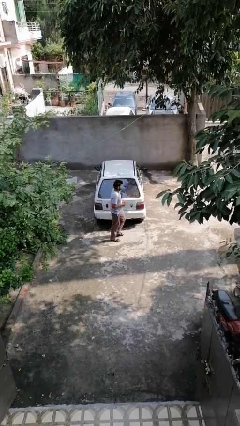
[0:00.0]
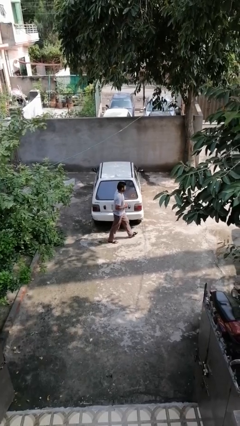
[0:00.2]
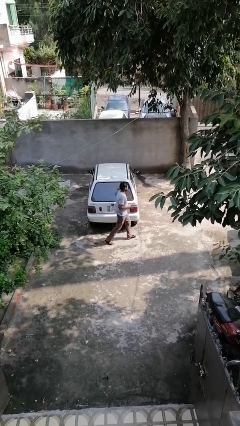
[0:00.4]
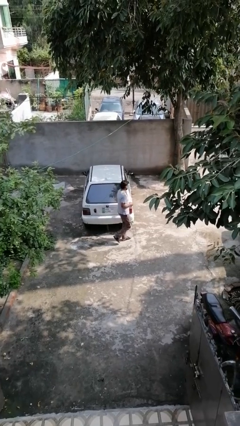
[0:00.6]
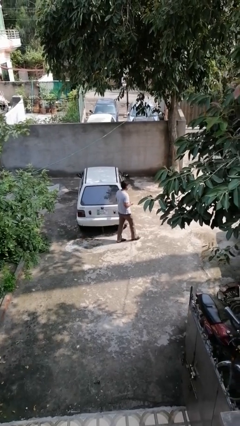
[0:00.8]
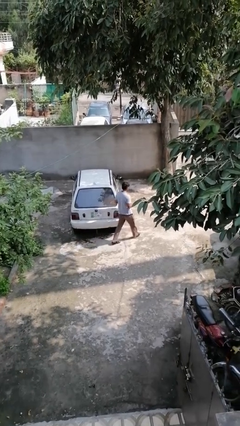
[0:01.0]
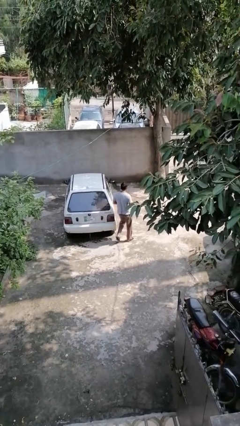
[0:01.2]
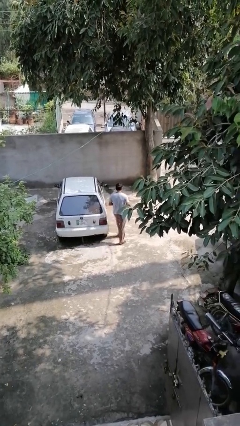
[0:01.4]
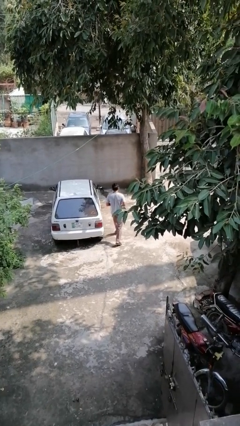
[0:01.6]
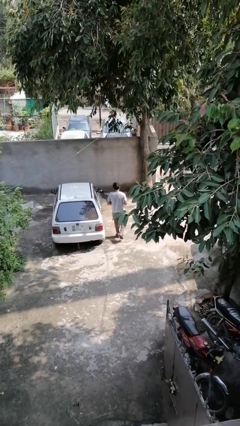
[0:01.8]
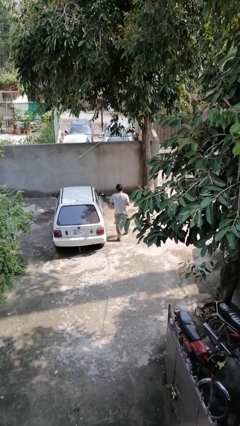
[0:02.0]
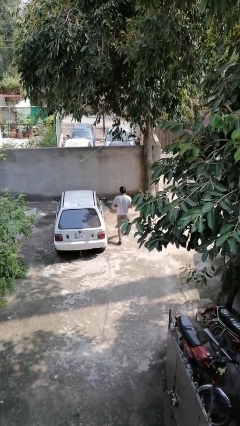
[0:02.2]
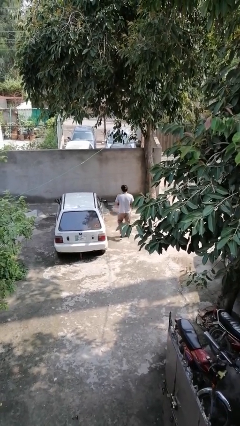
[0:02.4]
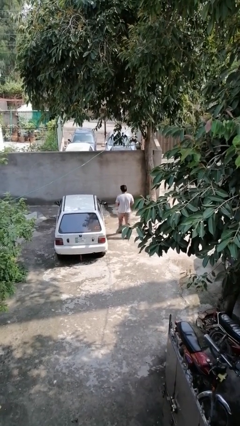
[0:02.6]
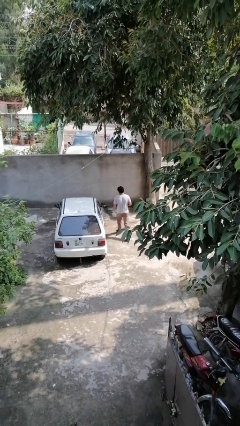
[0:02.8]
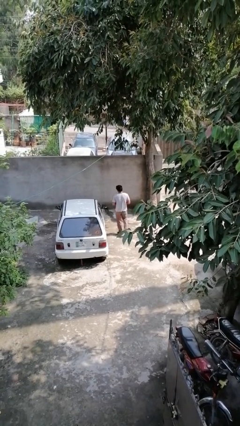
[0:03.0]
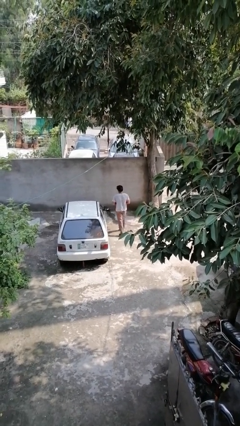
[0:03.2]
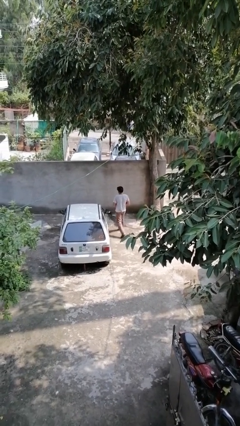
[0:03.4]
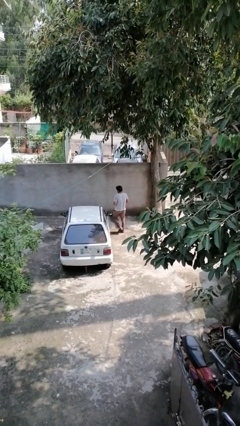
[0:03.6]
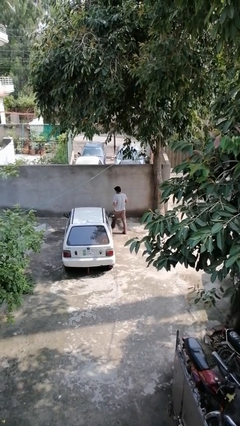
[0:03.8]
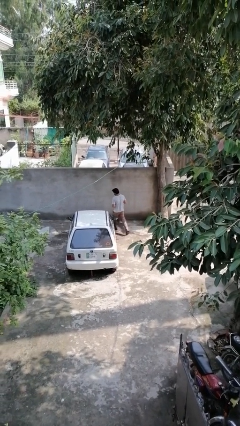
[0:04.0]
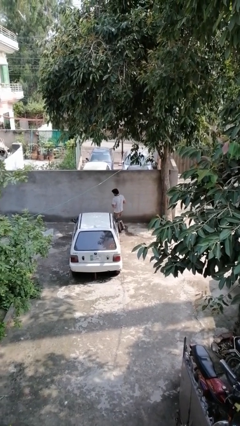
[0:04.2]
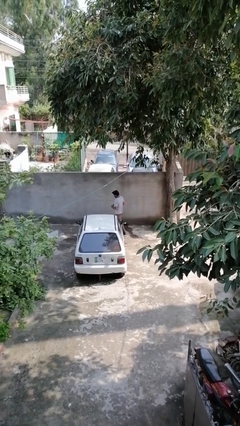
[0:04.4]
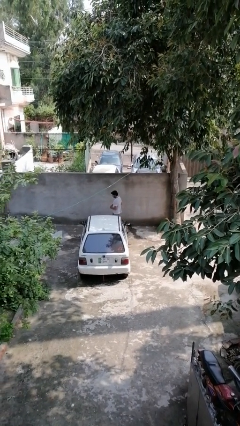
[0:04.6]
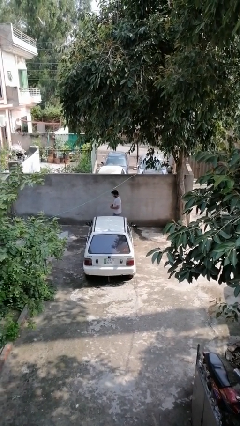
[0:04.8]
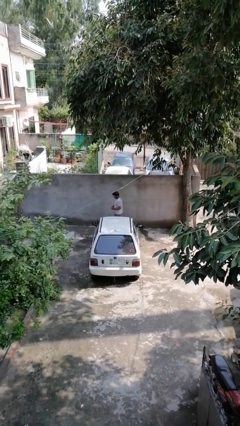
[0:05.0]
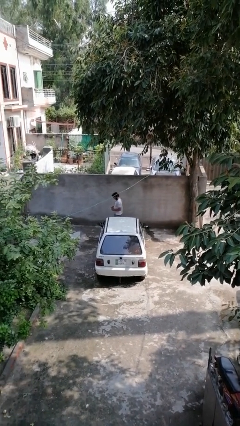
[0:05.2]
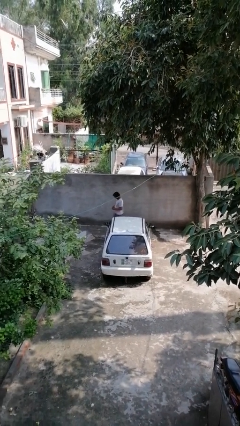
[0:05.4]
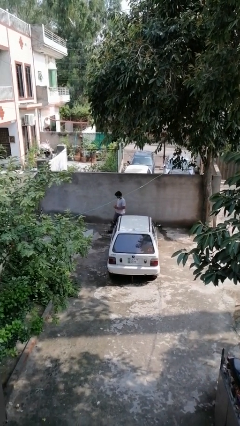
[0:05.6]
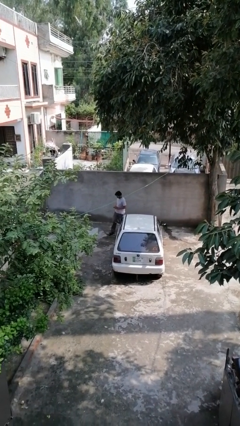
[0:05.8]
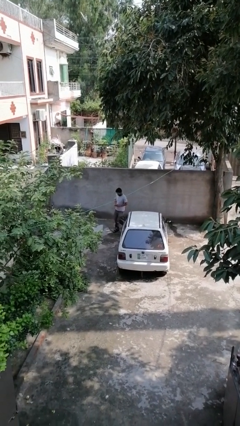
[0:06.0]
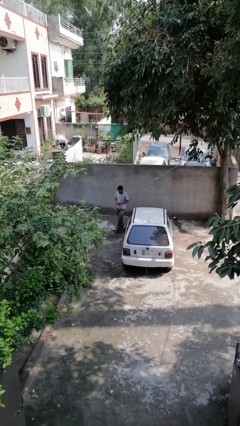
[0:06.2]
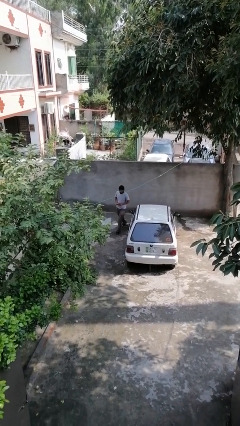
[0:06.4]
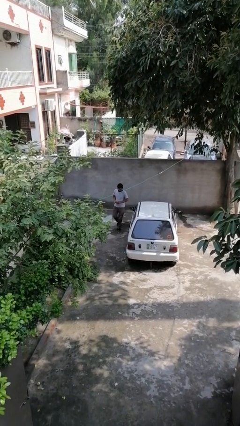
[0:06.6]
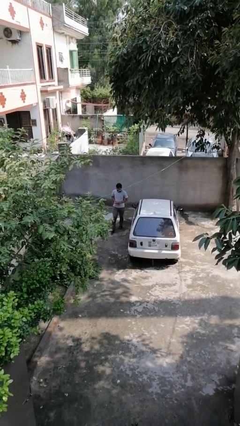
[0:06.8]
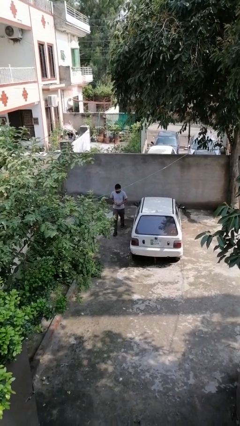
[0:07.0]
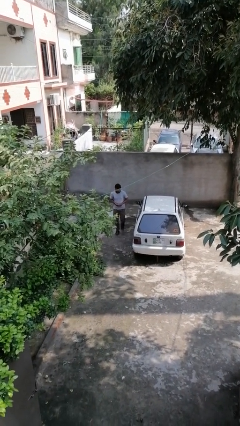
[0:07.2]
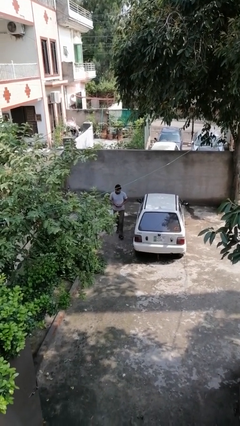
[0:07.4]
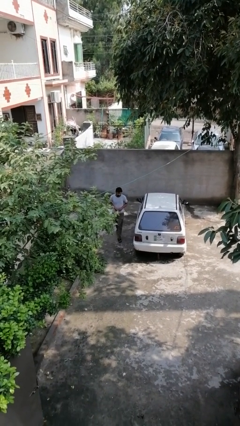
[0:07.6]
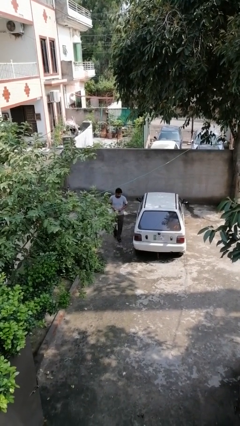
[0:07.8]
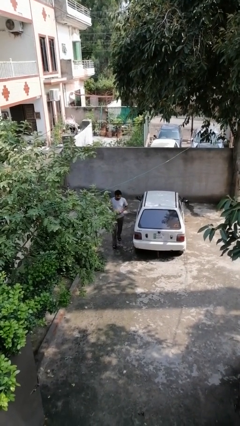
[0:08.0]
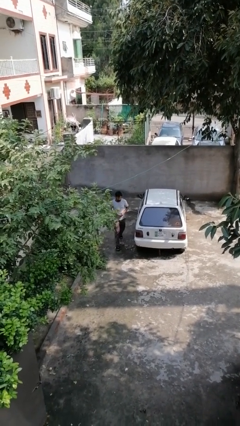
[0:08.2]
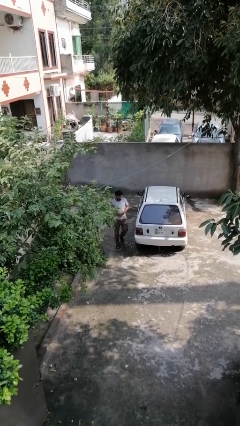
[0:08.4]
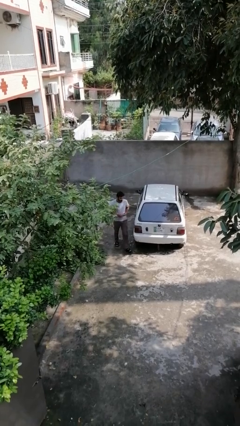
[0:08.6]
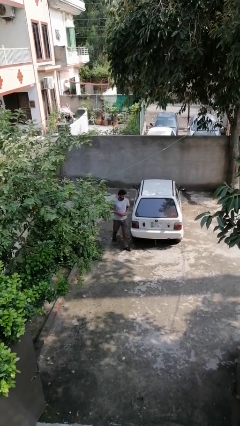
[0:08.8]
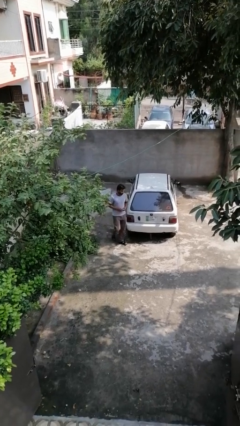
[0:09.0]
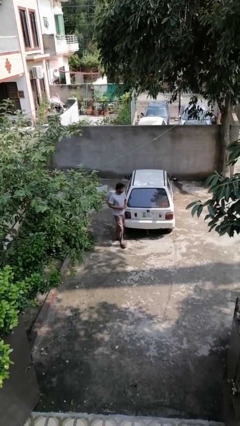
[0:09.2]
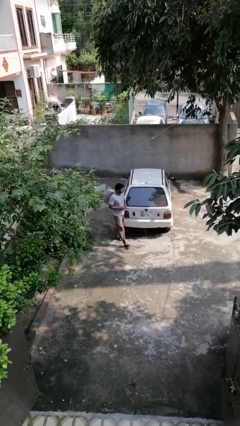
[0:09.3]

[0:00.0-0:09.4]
person walks around car

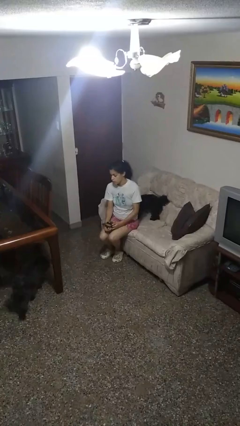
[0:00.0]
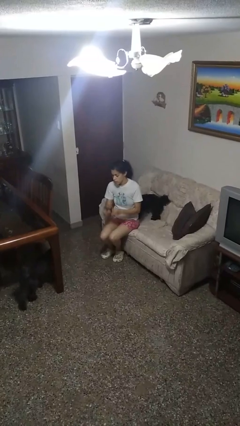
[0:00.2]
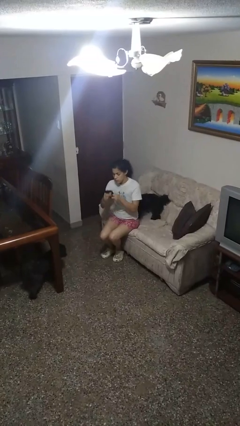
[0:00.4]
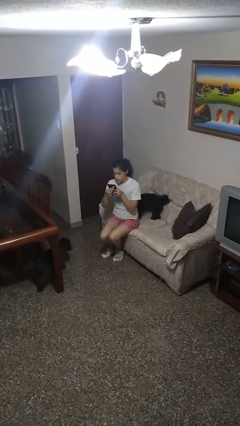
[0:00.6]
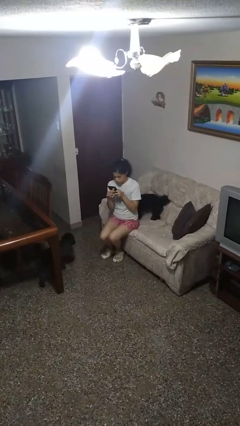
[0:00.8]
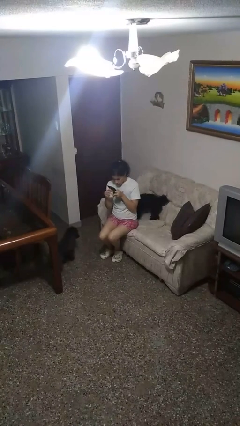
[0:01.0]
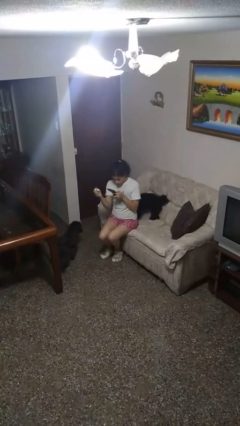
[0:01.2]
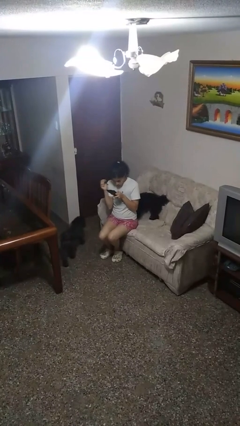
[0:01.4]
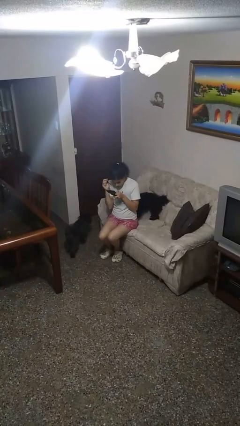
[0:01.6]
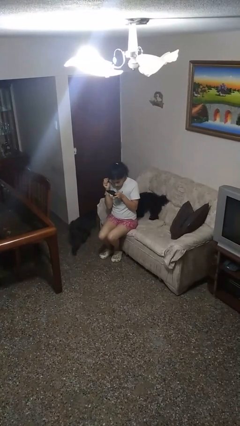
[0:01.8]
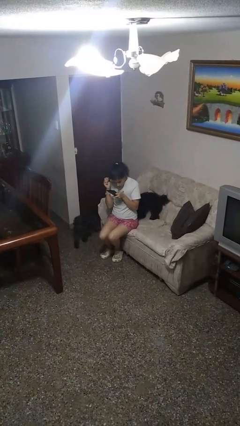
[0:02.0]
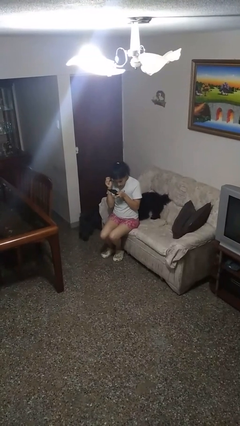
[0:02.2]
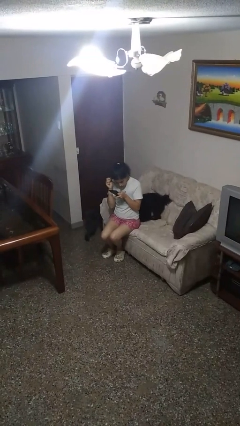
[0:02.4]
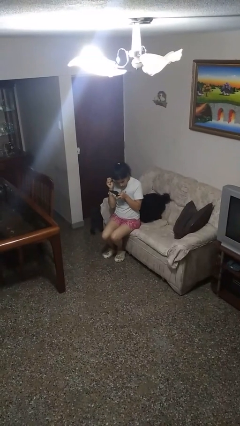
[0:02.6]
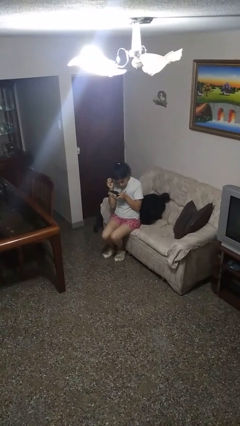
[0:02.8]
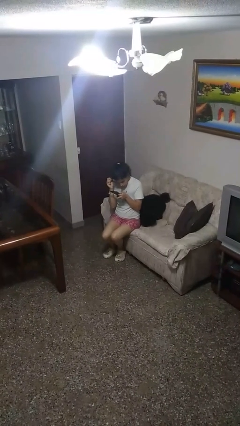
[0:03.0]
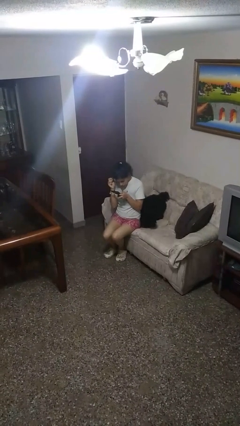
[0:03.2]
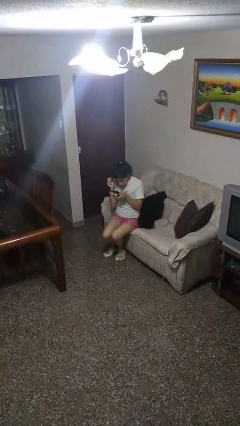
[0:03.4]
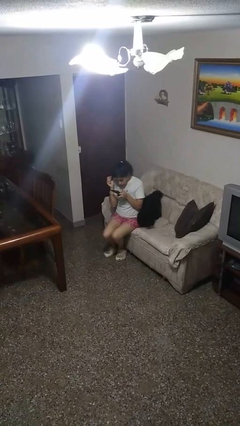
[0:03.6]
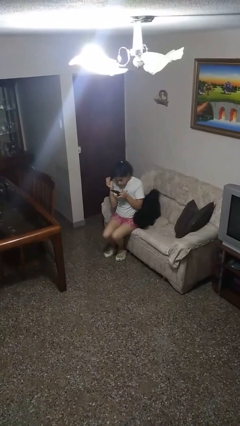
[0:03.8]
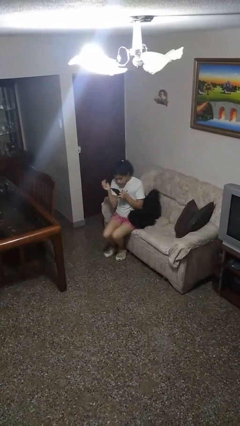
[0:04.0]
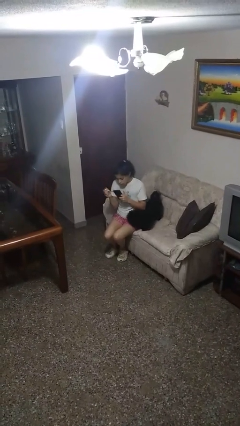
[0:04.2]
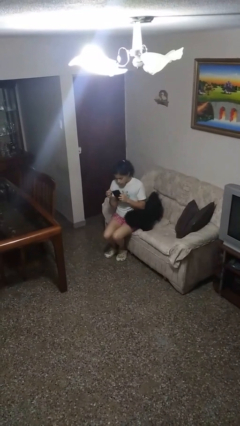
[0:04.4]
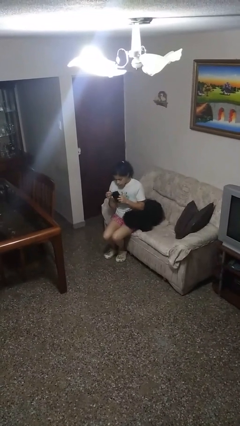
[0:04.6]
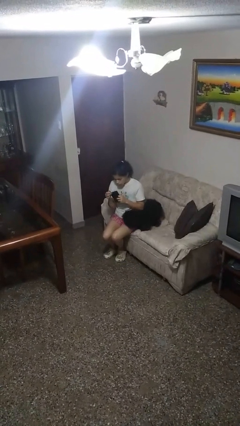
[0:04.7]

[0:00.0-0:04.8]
person applies eye makeup

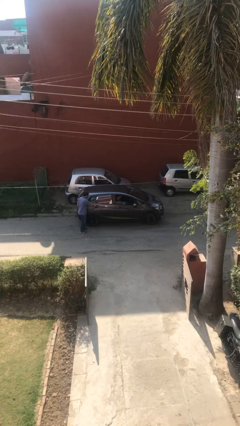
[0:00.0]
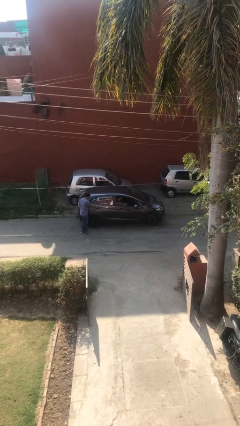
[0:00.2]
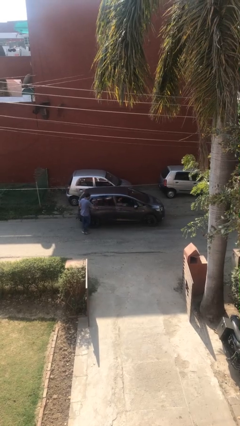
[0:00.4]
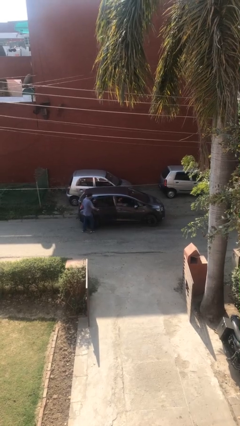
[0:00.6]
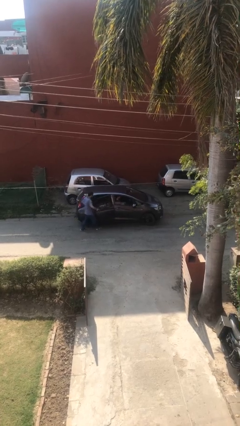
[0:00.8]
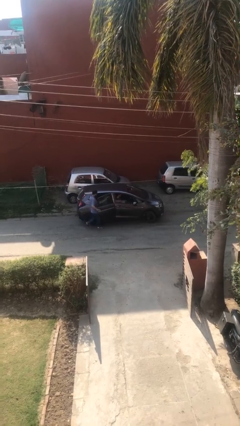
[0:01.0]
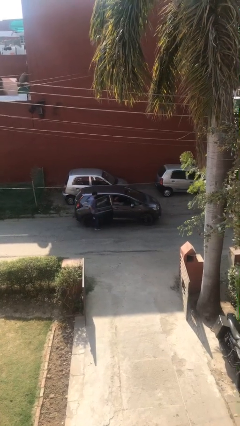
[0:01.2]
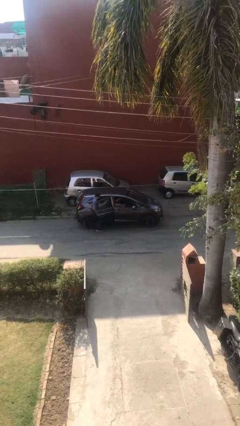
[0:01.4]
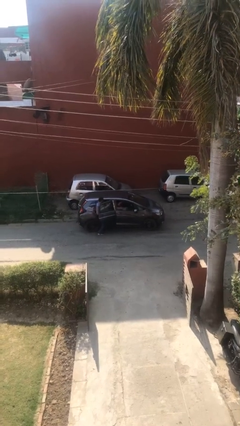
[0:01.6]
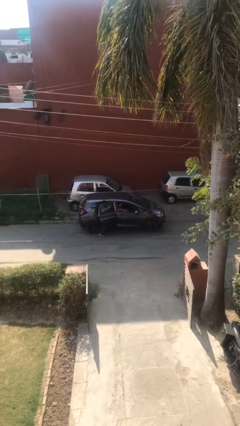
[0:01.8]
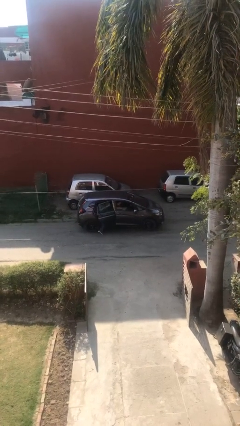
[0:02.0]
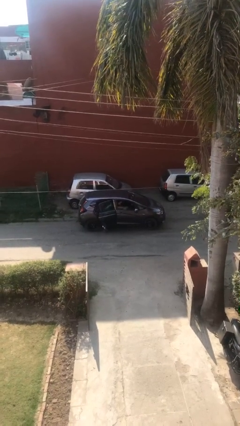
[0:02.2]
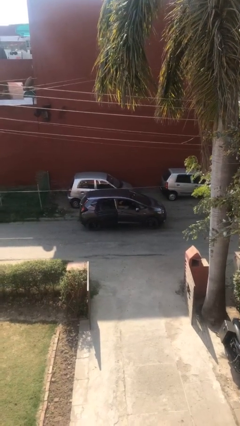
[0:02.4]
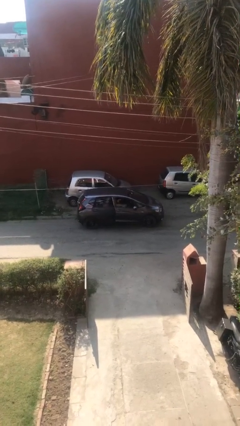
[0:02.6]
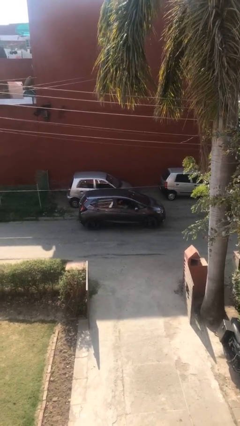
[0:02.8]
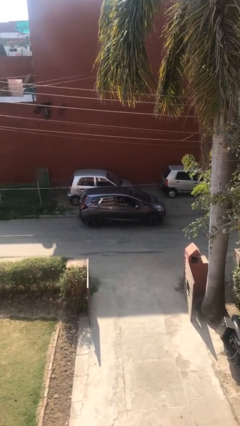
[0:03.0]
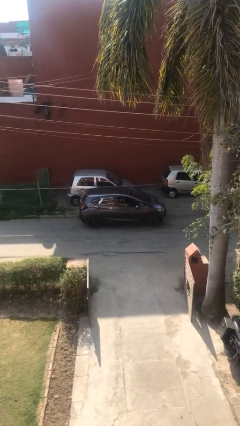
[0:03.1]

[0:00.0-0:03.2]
car picks up person
